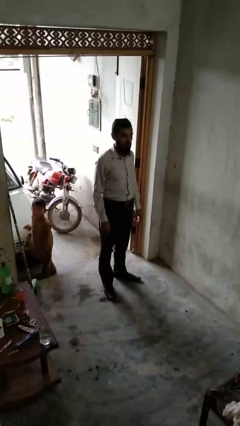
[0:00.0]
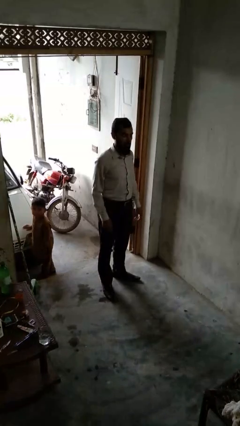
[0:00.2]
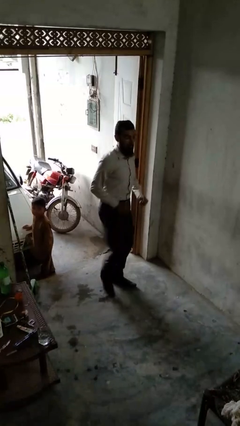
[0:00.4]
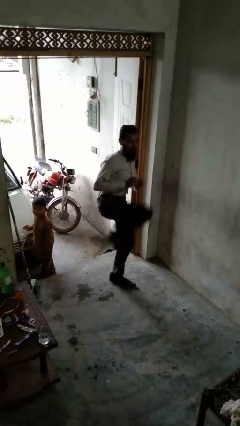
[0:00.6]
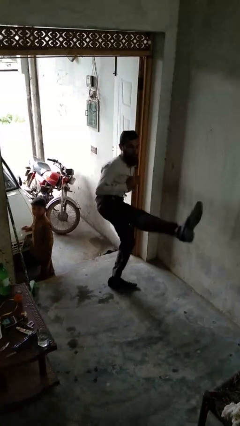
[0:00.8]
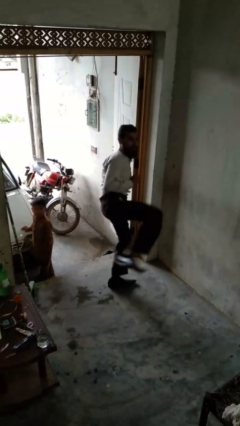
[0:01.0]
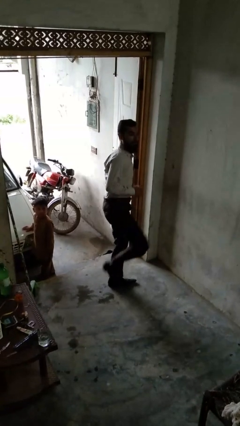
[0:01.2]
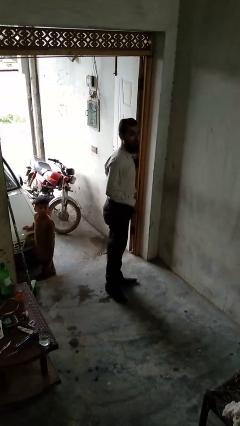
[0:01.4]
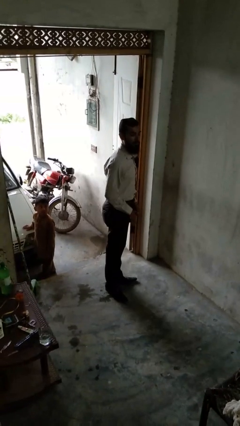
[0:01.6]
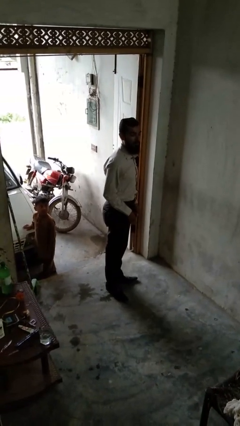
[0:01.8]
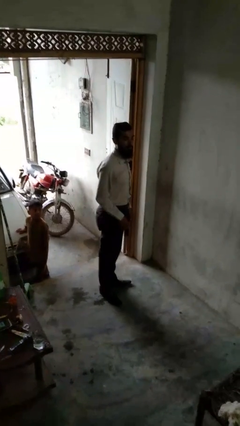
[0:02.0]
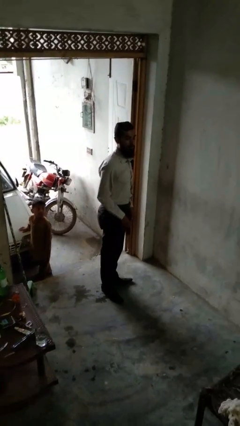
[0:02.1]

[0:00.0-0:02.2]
person karate kicks

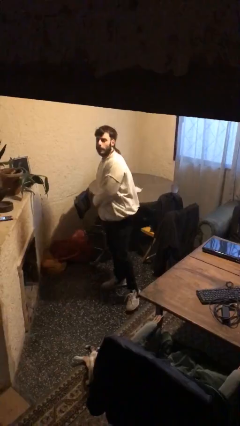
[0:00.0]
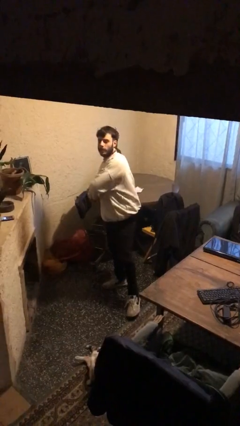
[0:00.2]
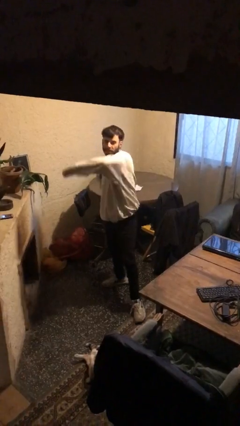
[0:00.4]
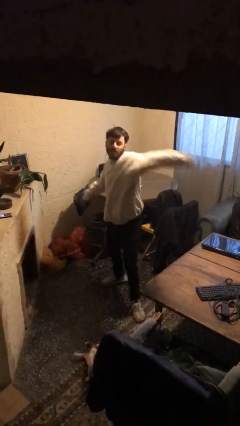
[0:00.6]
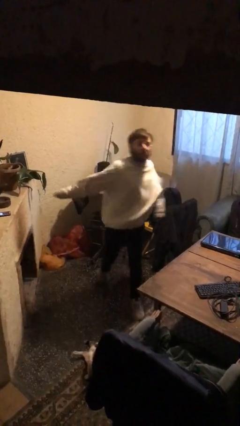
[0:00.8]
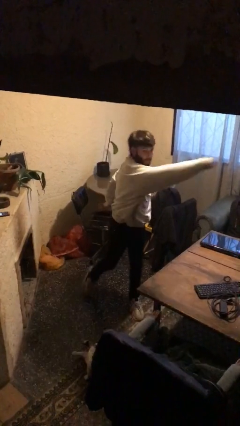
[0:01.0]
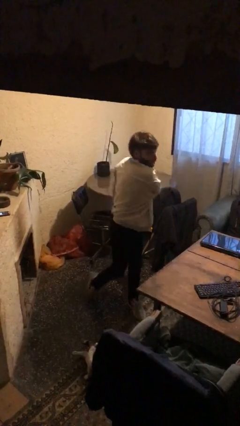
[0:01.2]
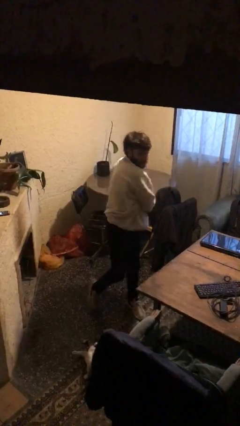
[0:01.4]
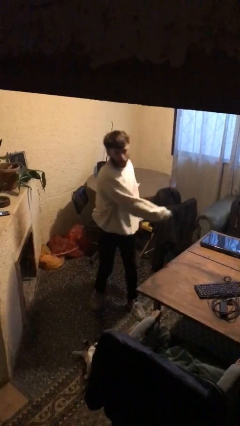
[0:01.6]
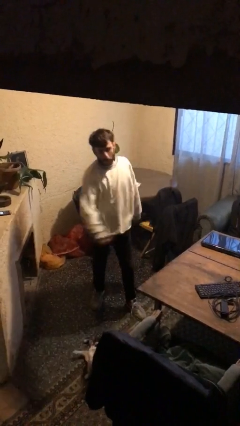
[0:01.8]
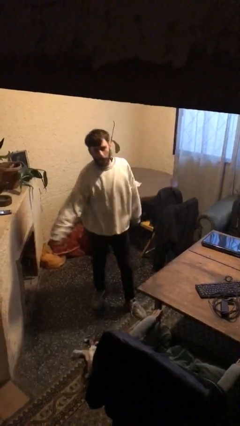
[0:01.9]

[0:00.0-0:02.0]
person punches

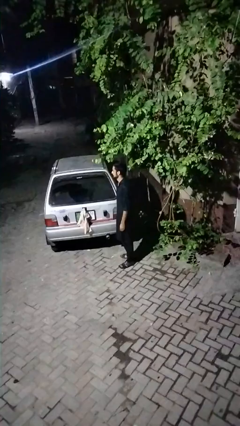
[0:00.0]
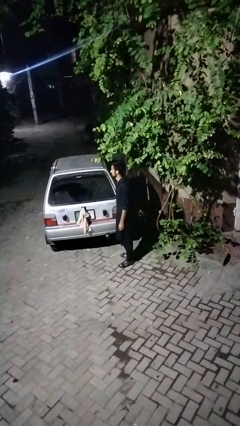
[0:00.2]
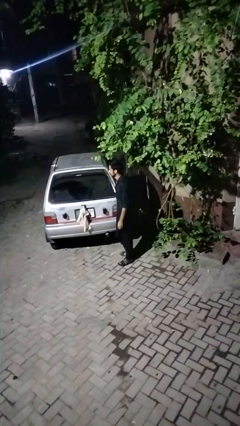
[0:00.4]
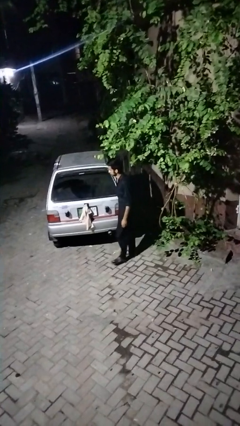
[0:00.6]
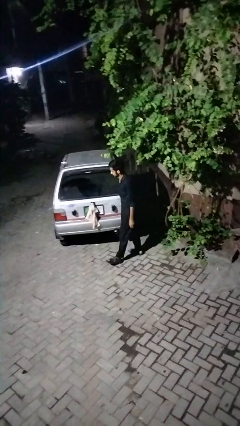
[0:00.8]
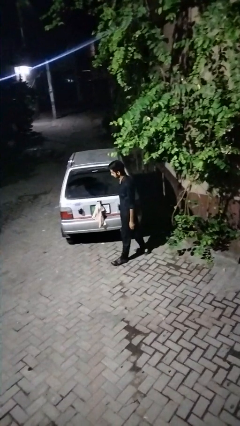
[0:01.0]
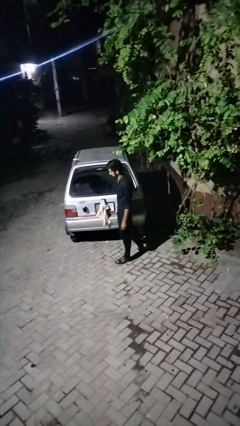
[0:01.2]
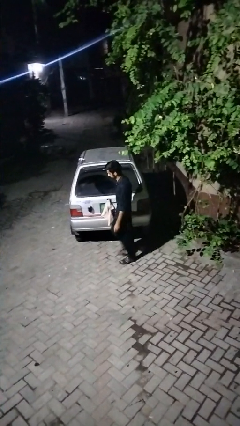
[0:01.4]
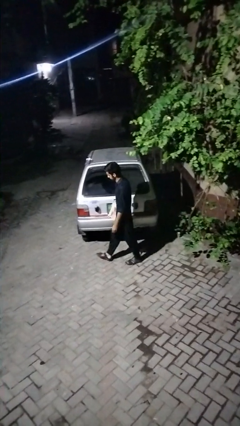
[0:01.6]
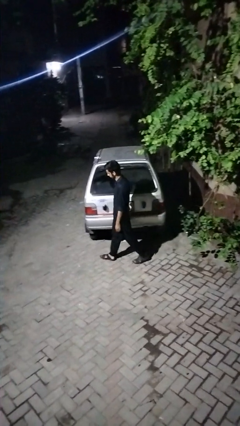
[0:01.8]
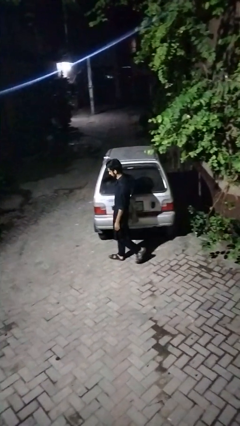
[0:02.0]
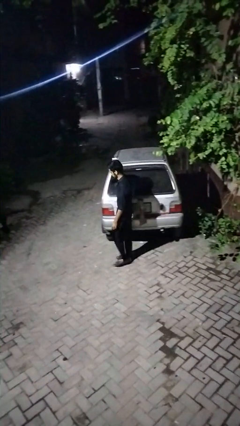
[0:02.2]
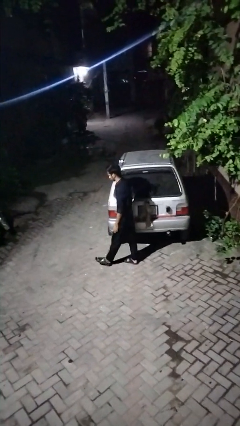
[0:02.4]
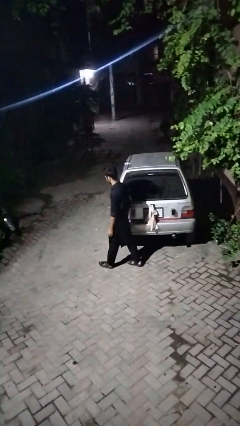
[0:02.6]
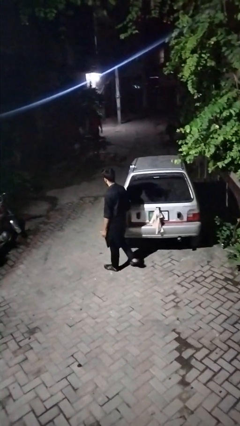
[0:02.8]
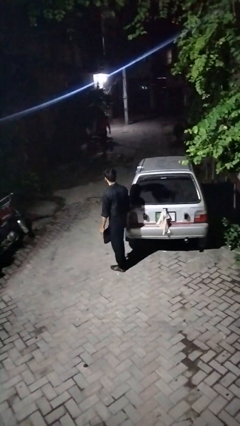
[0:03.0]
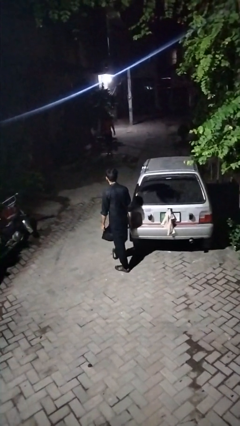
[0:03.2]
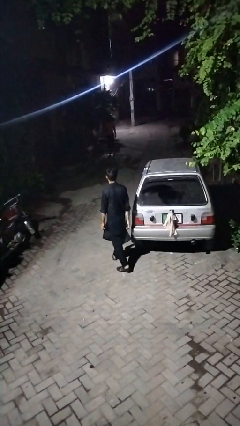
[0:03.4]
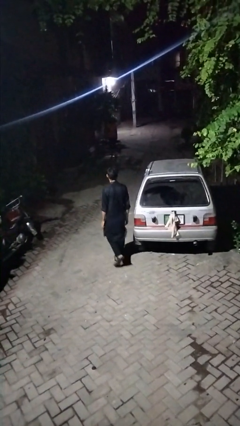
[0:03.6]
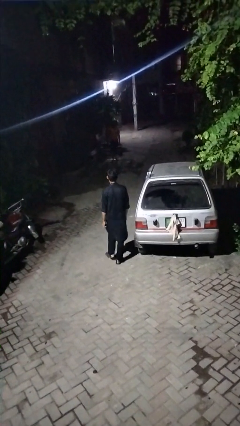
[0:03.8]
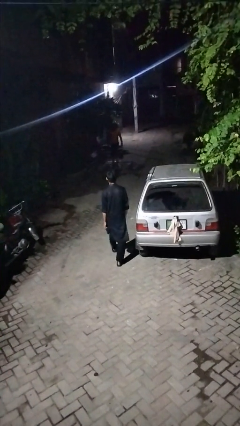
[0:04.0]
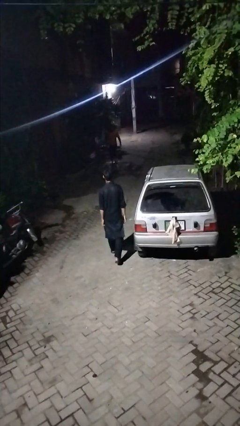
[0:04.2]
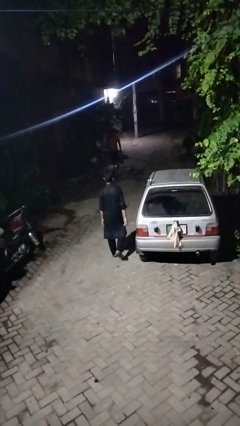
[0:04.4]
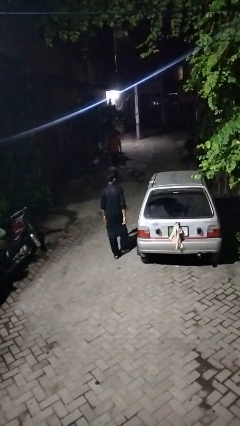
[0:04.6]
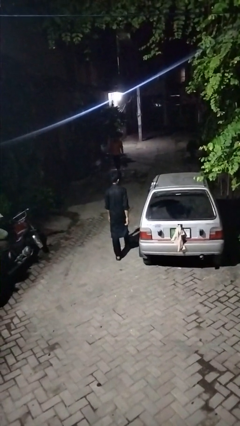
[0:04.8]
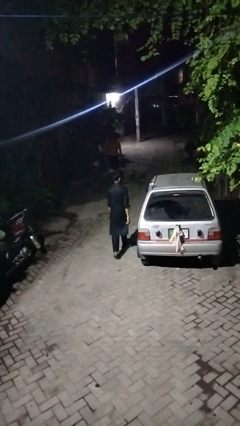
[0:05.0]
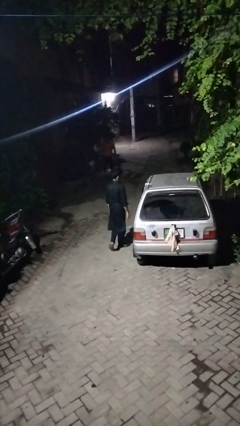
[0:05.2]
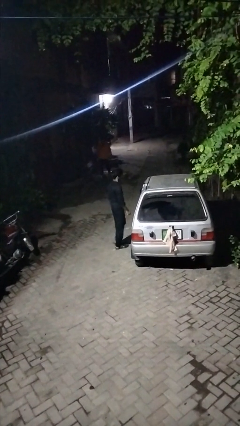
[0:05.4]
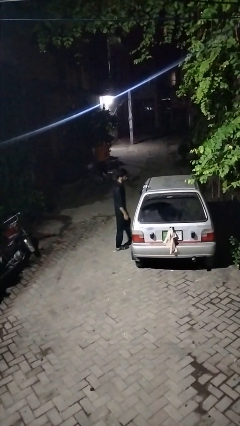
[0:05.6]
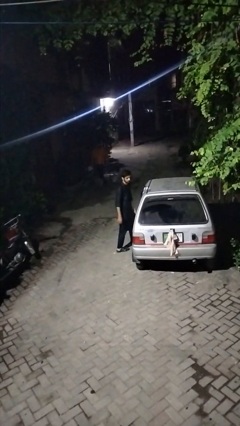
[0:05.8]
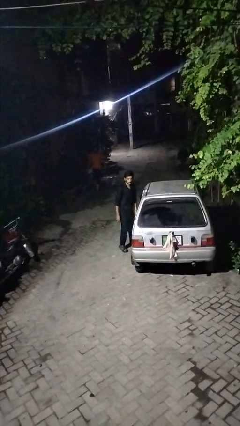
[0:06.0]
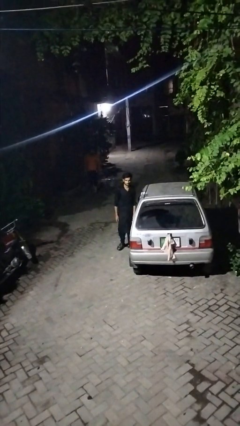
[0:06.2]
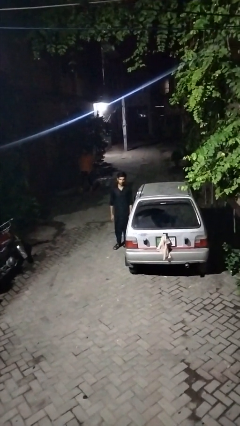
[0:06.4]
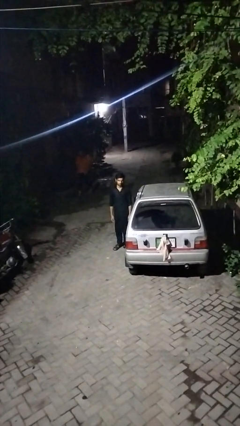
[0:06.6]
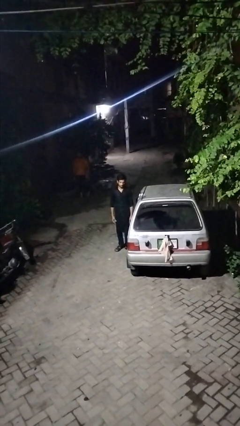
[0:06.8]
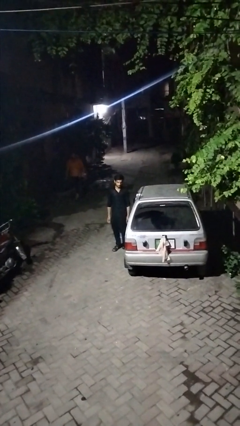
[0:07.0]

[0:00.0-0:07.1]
person walks around car

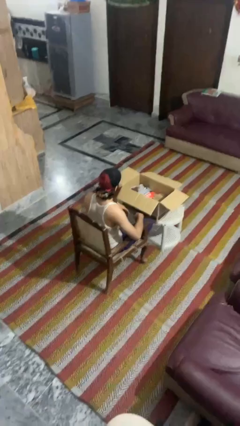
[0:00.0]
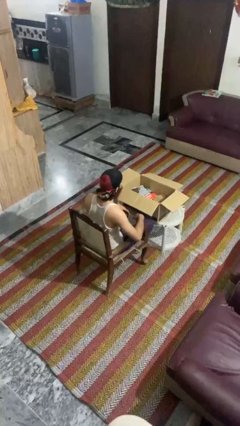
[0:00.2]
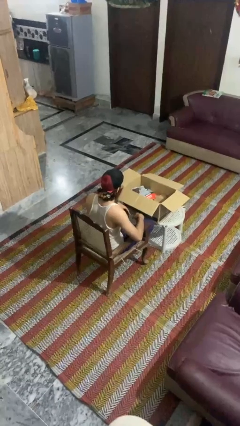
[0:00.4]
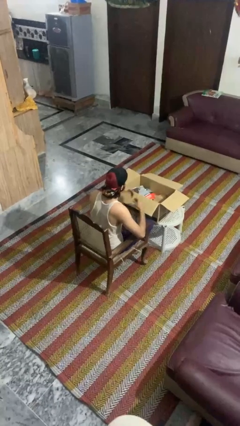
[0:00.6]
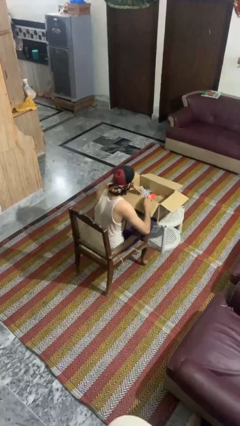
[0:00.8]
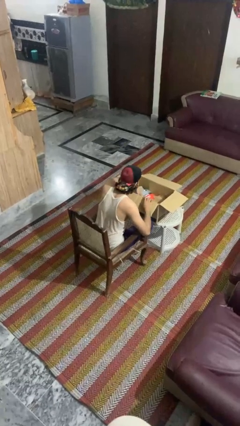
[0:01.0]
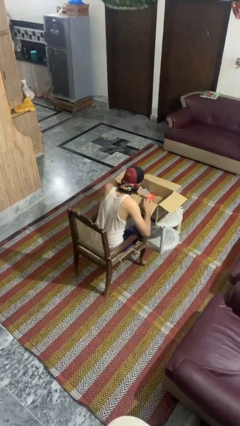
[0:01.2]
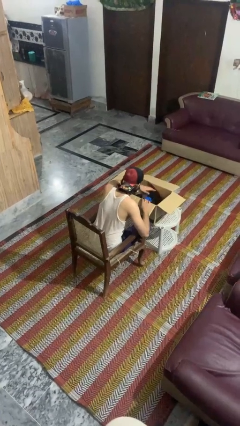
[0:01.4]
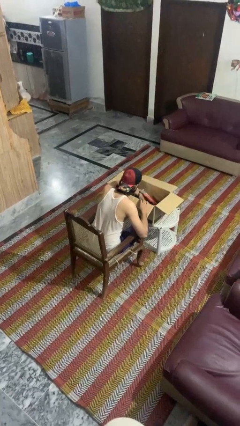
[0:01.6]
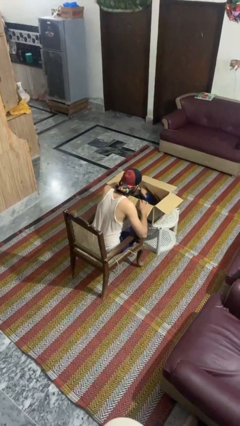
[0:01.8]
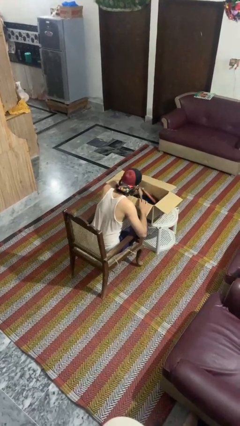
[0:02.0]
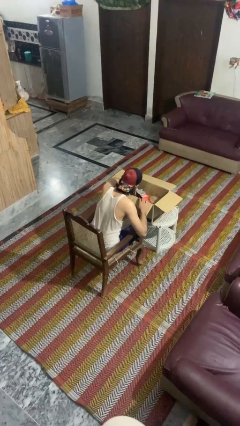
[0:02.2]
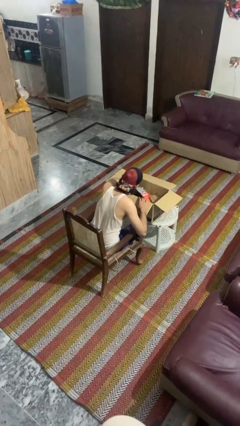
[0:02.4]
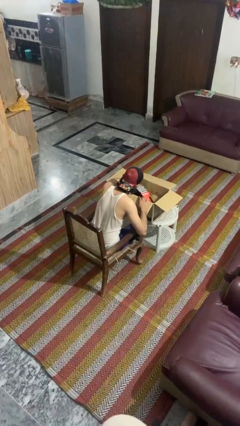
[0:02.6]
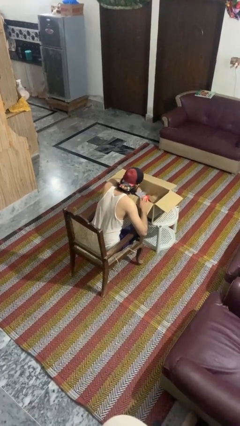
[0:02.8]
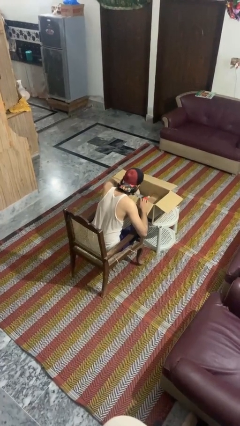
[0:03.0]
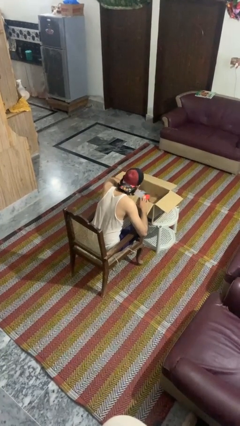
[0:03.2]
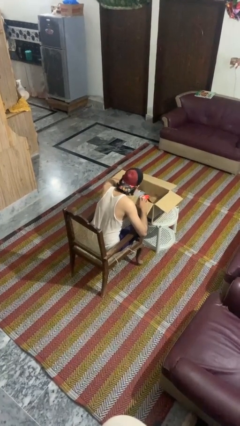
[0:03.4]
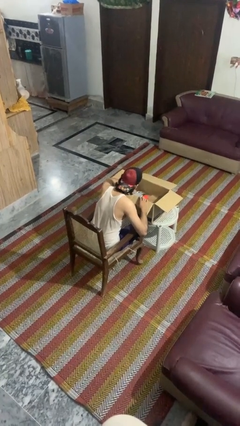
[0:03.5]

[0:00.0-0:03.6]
person searches in box

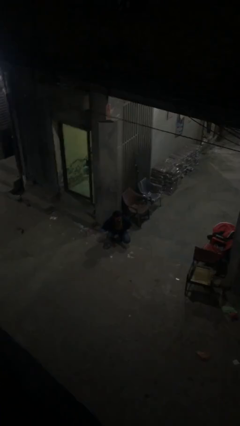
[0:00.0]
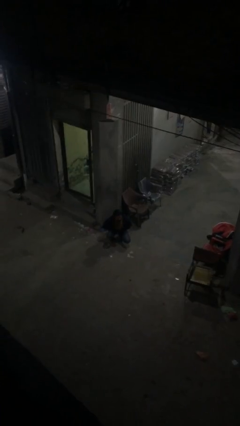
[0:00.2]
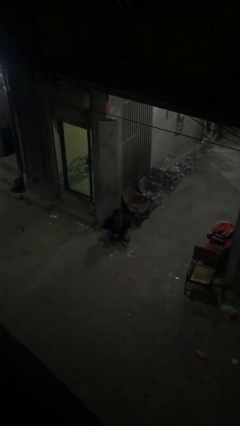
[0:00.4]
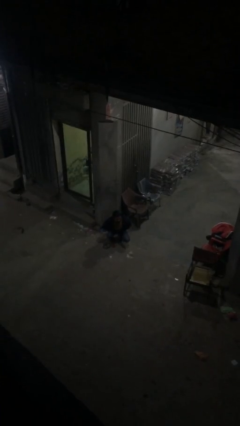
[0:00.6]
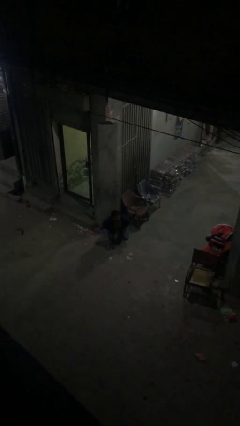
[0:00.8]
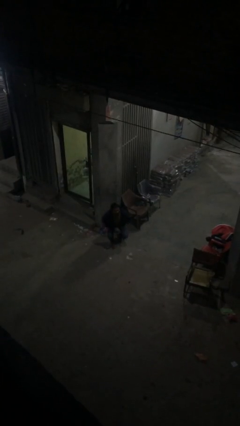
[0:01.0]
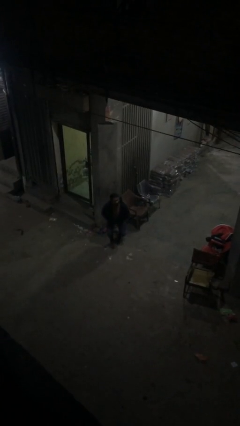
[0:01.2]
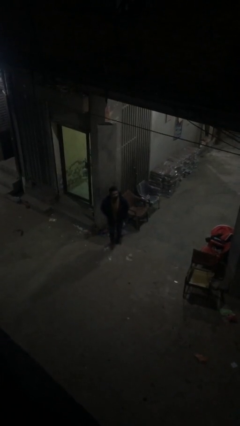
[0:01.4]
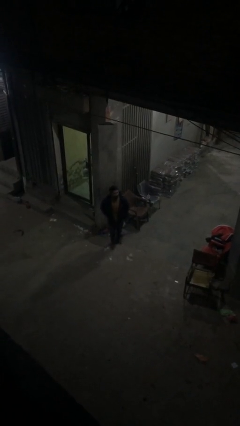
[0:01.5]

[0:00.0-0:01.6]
person stands up

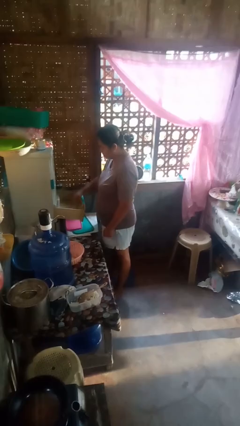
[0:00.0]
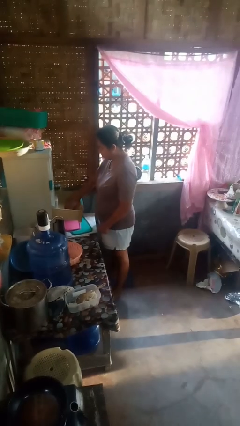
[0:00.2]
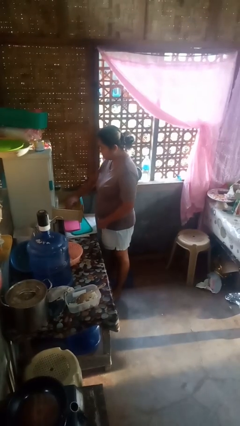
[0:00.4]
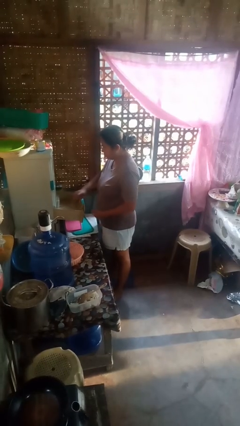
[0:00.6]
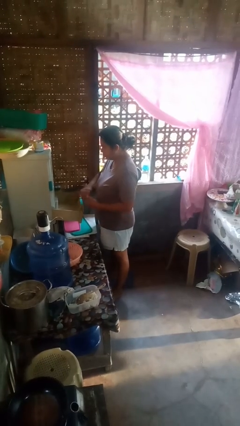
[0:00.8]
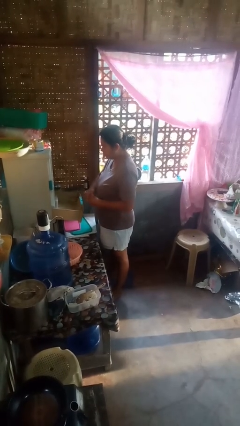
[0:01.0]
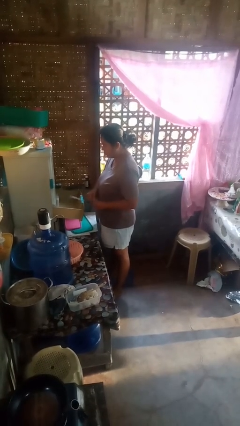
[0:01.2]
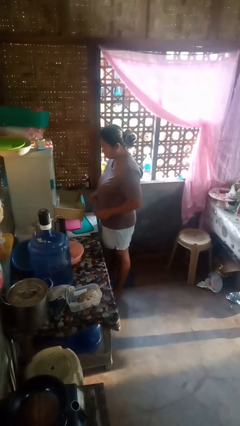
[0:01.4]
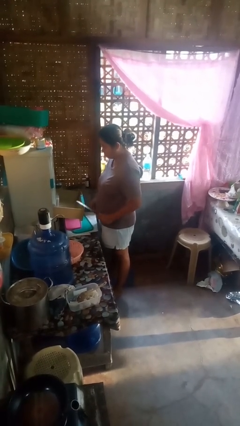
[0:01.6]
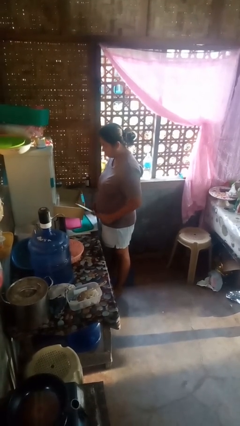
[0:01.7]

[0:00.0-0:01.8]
person takes object from kitchen drawer
